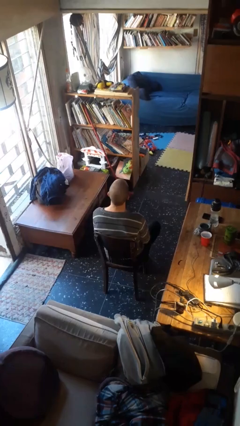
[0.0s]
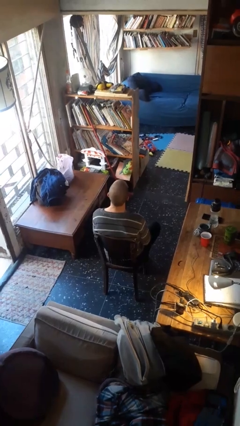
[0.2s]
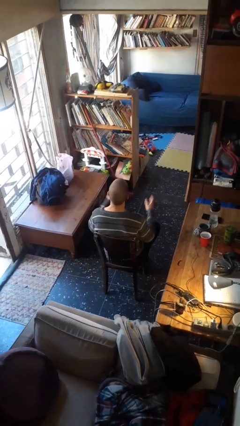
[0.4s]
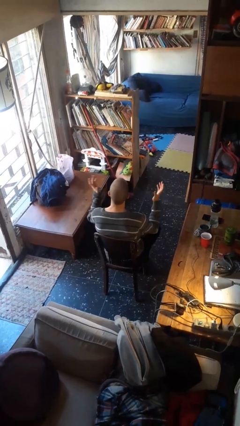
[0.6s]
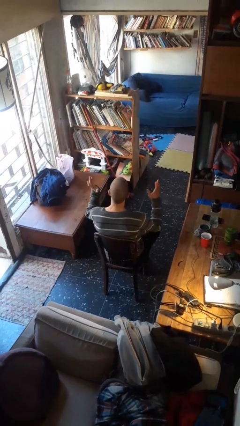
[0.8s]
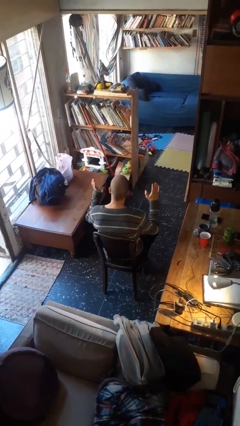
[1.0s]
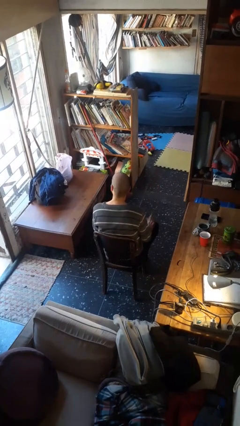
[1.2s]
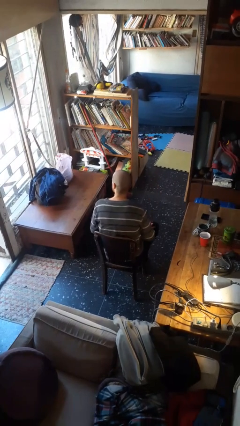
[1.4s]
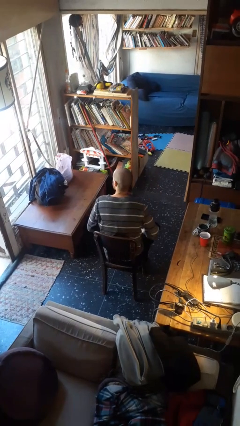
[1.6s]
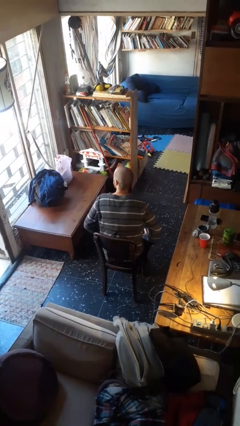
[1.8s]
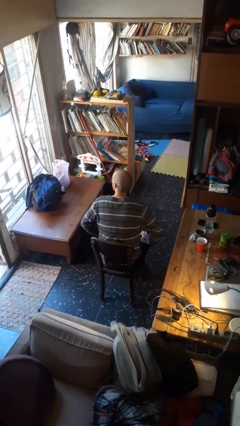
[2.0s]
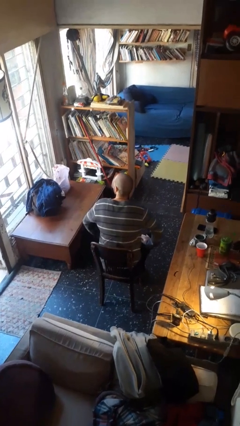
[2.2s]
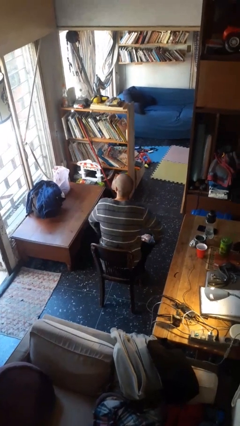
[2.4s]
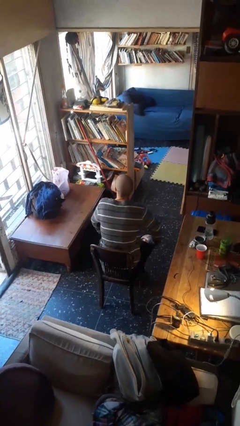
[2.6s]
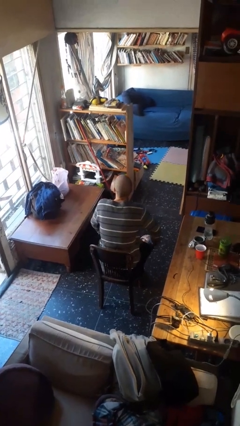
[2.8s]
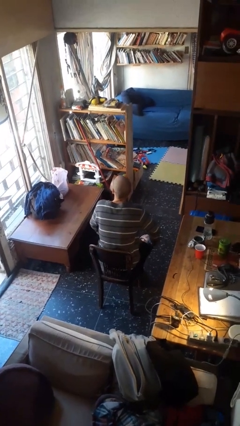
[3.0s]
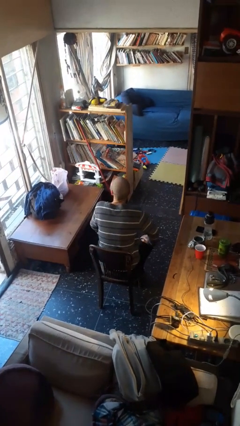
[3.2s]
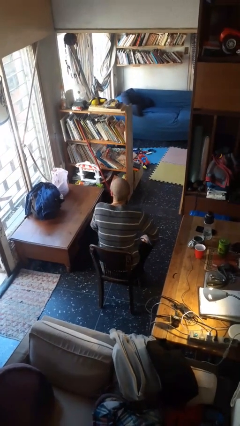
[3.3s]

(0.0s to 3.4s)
person slaps hands on thighs

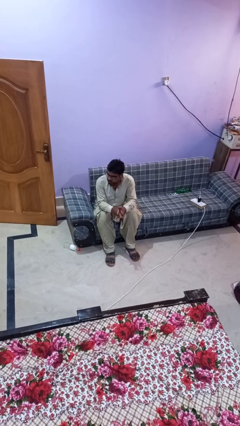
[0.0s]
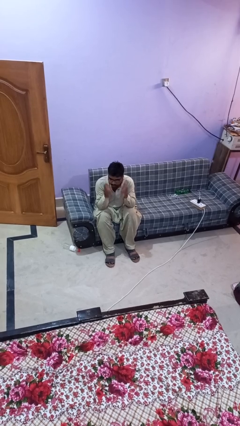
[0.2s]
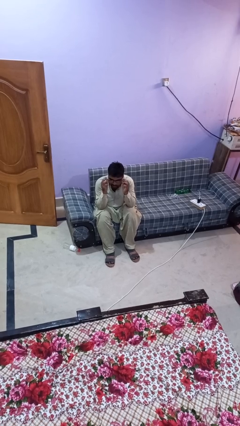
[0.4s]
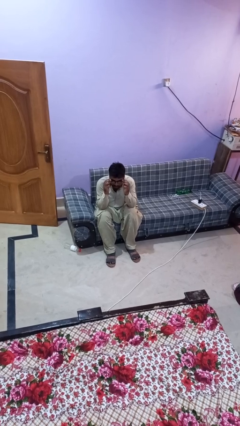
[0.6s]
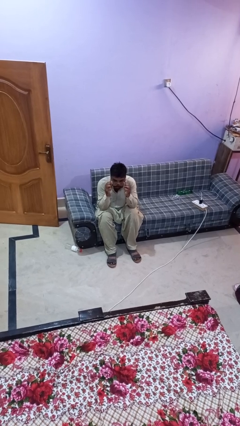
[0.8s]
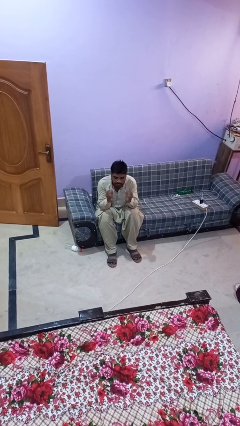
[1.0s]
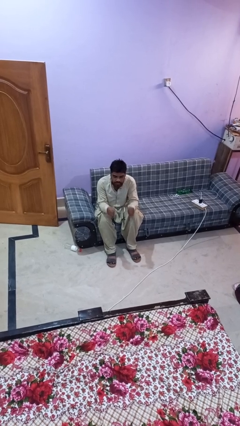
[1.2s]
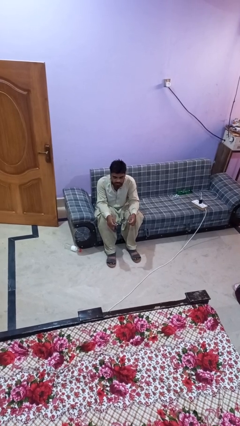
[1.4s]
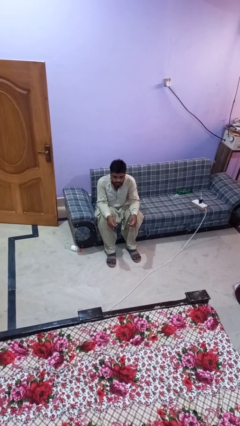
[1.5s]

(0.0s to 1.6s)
person takes off glasses

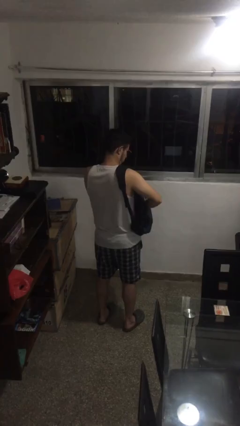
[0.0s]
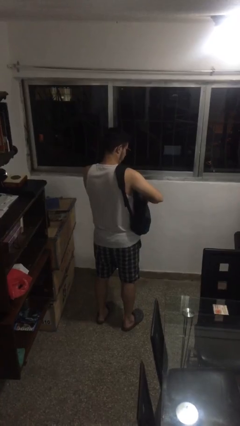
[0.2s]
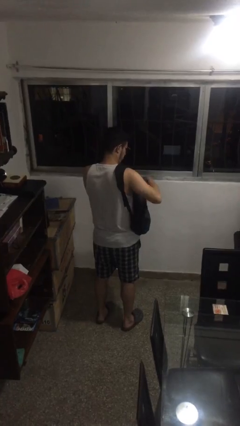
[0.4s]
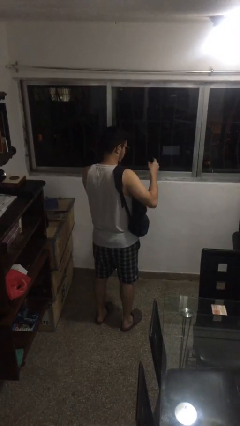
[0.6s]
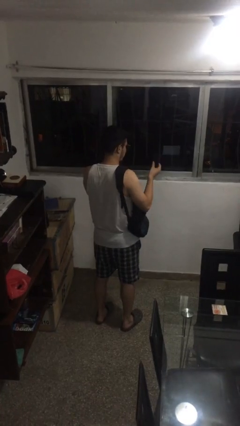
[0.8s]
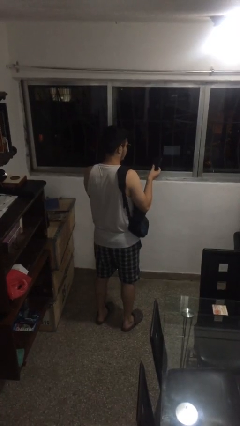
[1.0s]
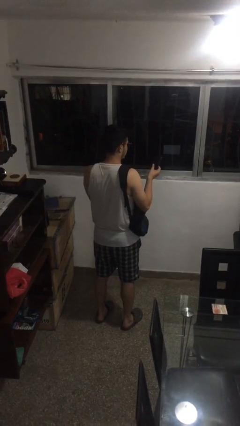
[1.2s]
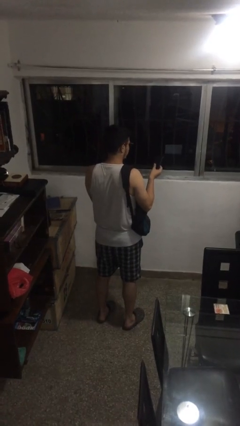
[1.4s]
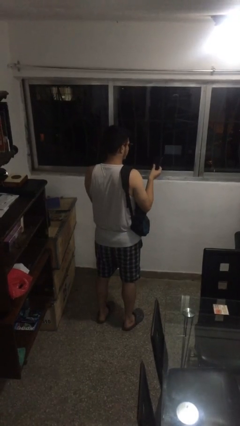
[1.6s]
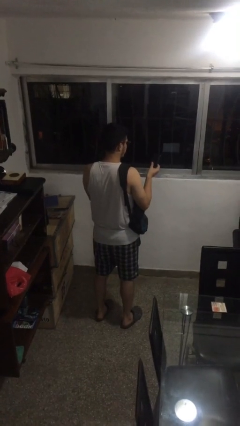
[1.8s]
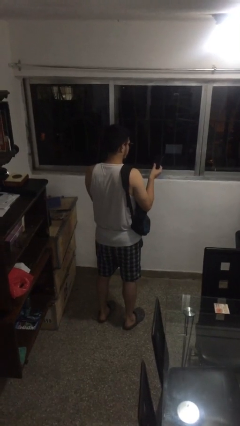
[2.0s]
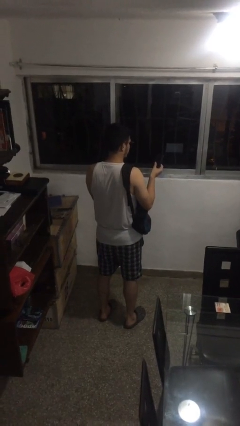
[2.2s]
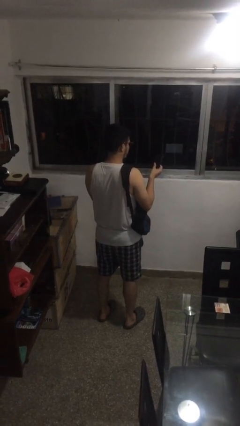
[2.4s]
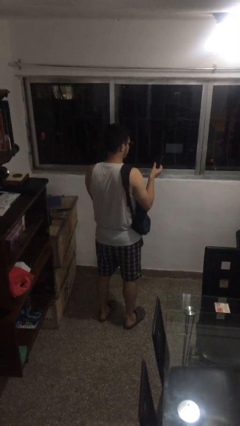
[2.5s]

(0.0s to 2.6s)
person takes object from backpack

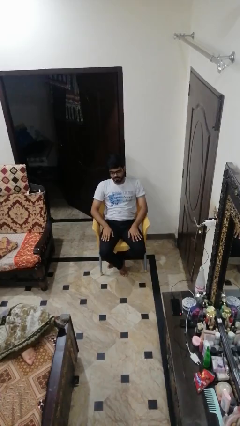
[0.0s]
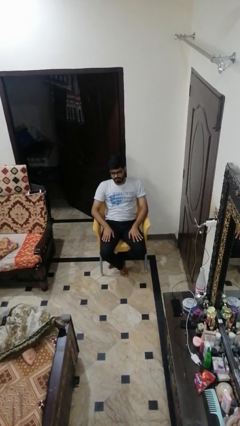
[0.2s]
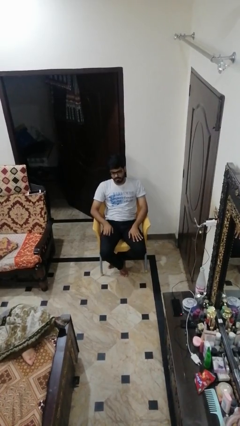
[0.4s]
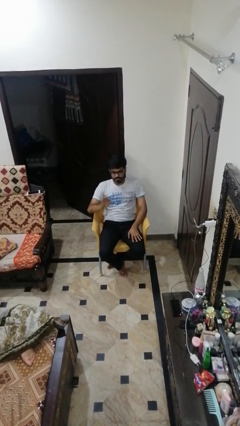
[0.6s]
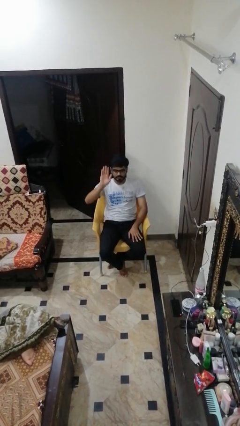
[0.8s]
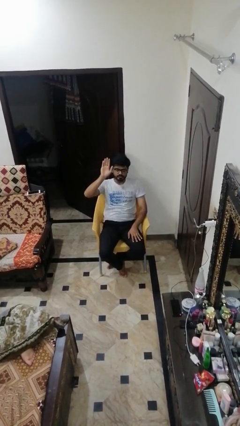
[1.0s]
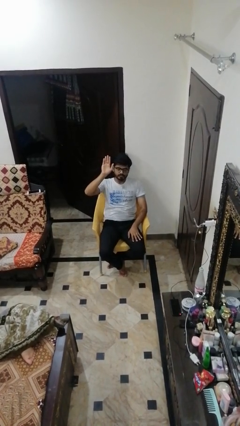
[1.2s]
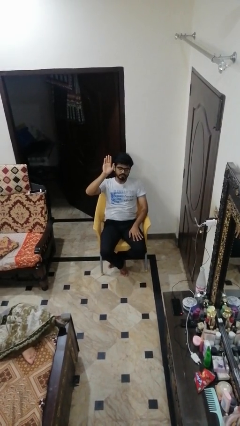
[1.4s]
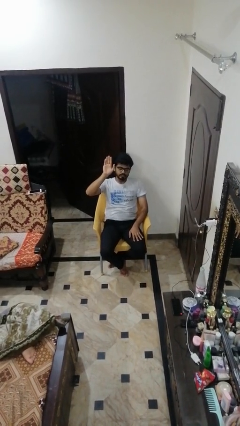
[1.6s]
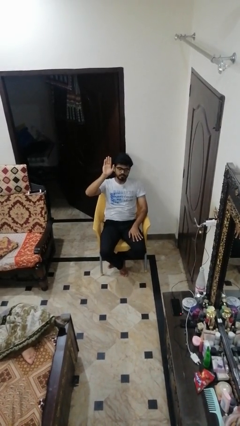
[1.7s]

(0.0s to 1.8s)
person gestures raise hand

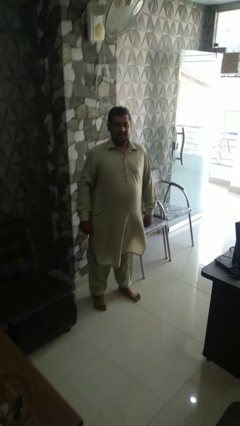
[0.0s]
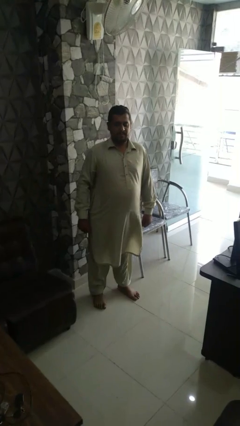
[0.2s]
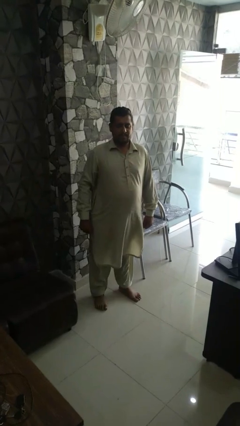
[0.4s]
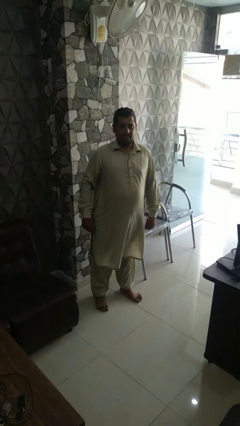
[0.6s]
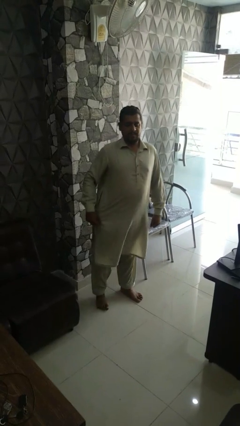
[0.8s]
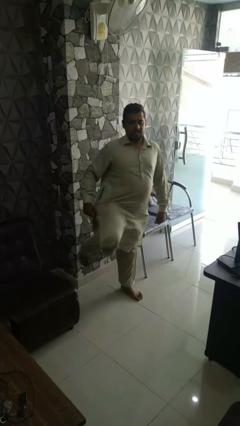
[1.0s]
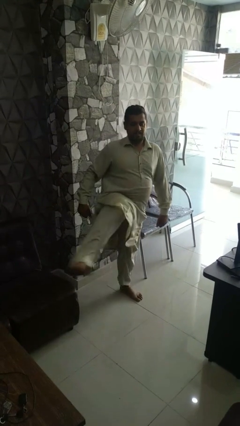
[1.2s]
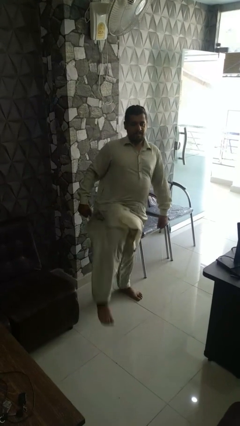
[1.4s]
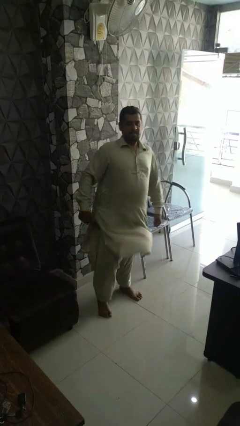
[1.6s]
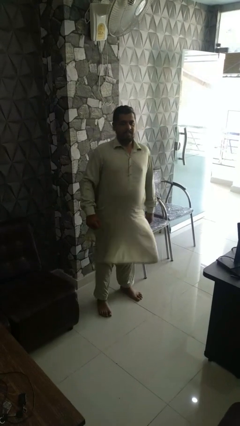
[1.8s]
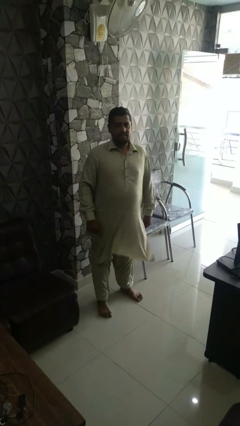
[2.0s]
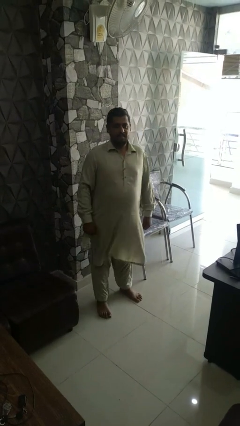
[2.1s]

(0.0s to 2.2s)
person karate kicks

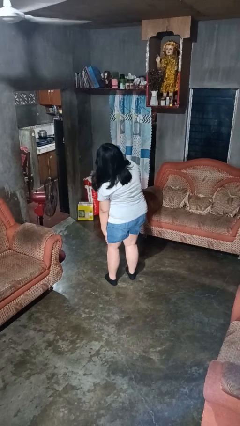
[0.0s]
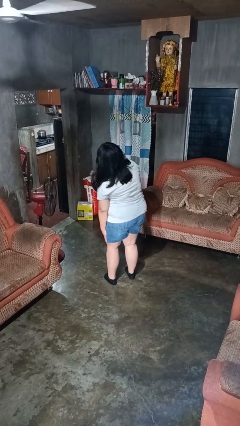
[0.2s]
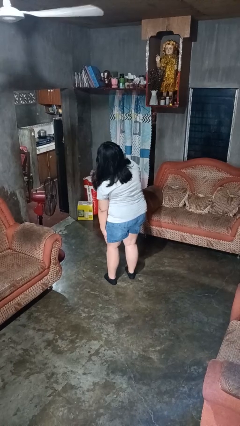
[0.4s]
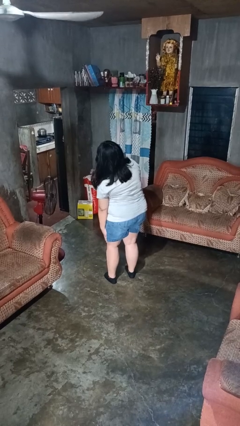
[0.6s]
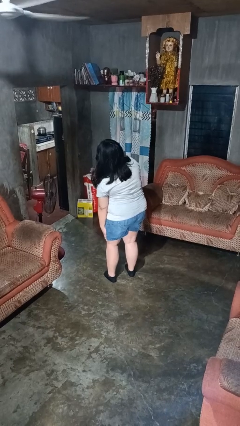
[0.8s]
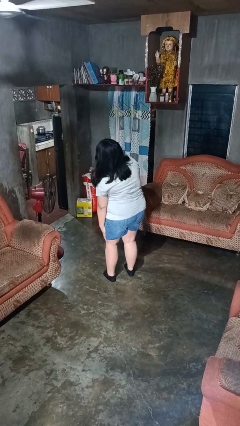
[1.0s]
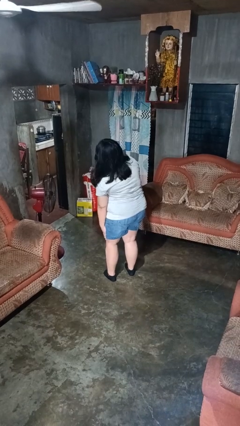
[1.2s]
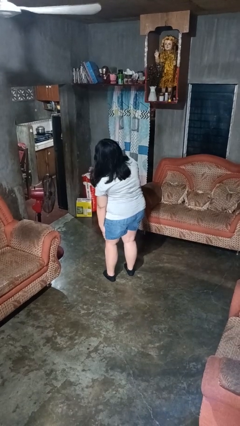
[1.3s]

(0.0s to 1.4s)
person swats bug

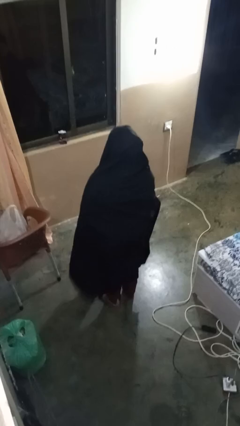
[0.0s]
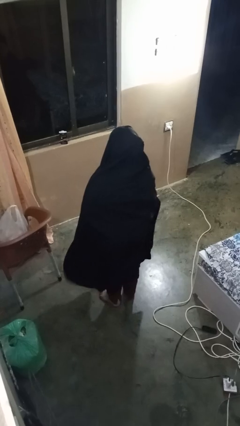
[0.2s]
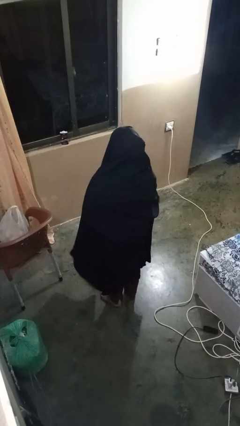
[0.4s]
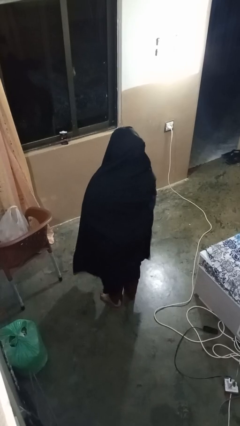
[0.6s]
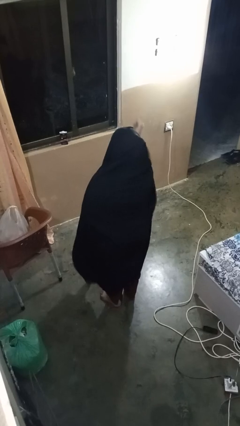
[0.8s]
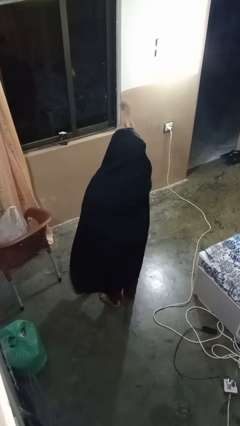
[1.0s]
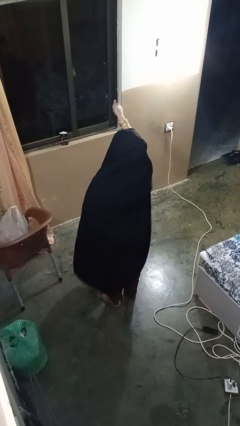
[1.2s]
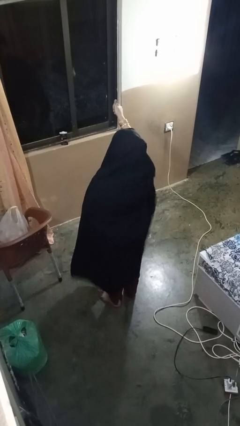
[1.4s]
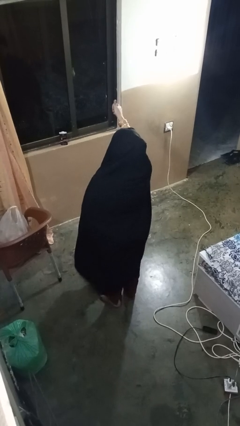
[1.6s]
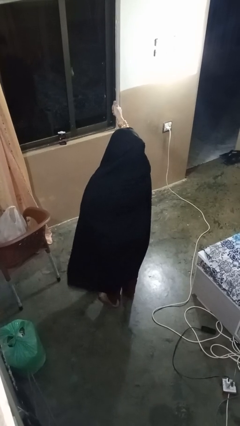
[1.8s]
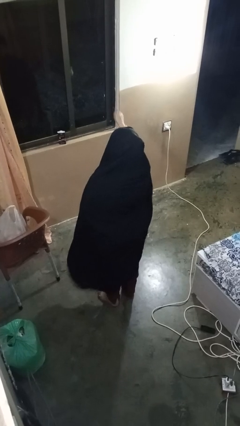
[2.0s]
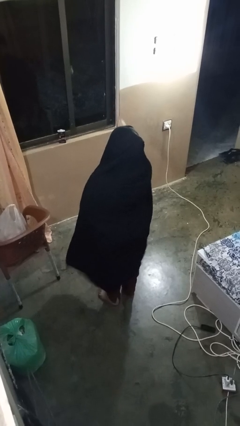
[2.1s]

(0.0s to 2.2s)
person gestures thumbs up

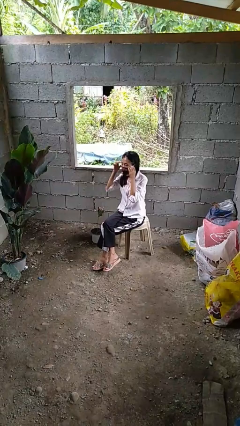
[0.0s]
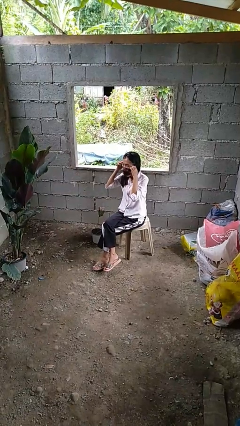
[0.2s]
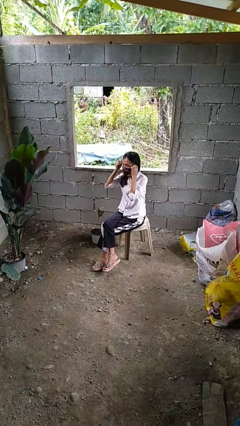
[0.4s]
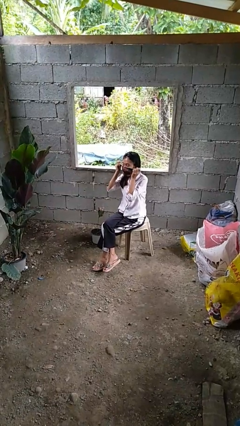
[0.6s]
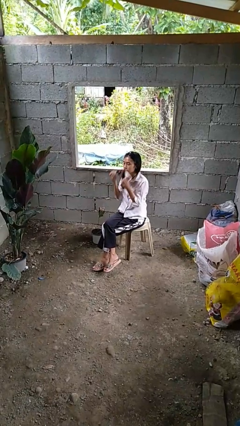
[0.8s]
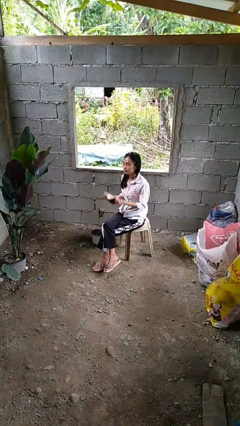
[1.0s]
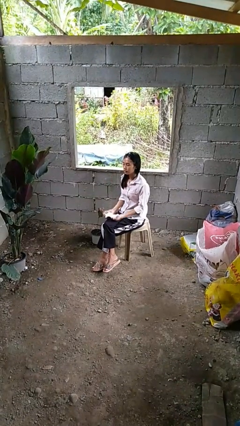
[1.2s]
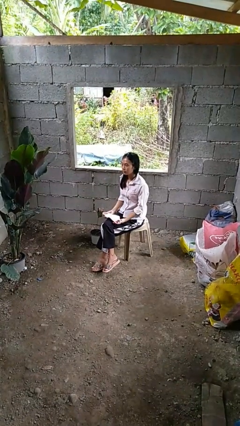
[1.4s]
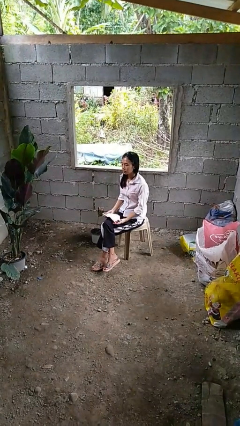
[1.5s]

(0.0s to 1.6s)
person takes off facemask

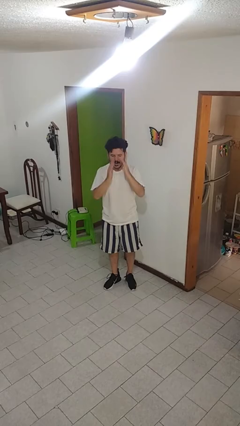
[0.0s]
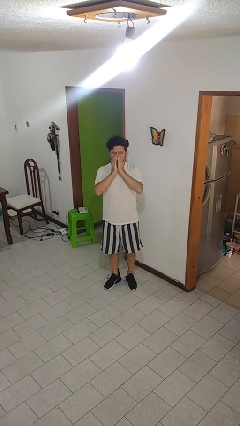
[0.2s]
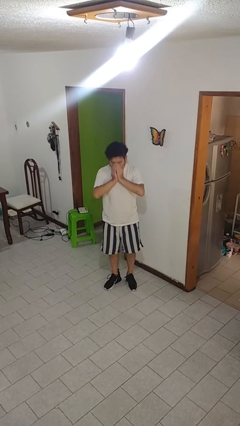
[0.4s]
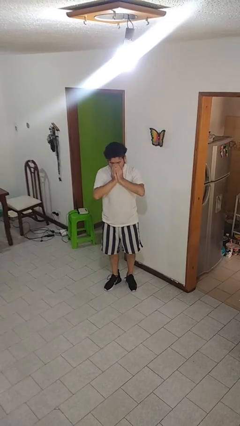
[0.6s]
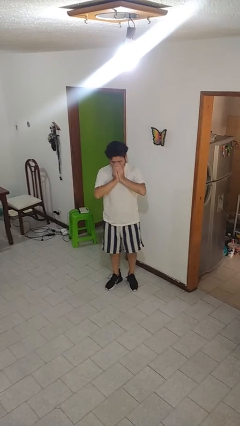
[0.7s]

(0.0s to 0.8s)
person sneezes into hand
